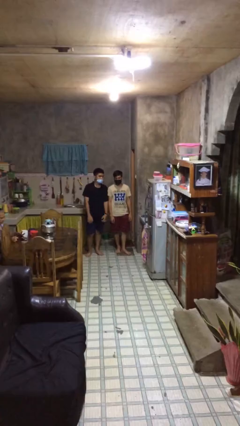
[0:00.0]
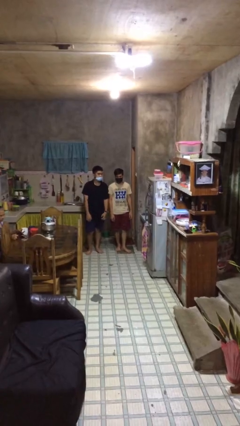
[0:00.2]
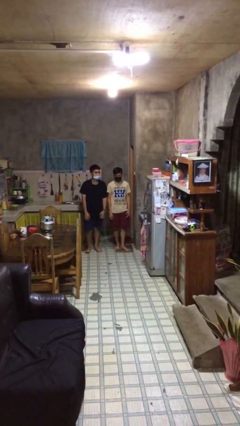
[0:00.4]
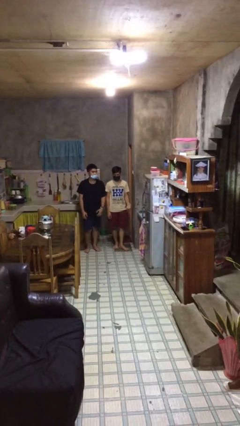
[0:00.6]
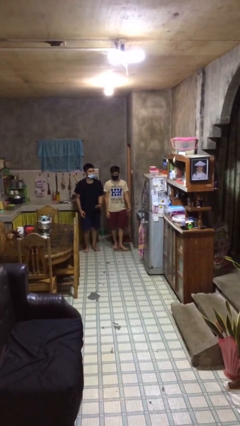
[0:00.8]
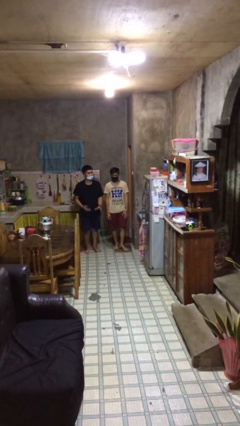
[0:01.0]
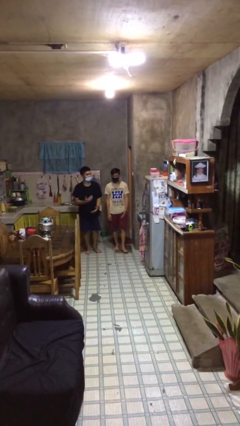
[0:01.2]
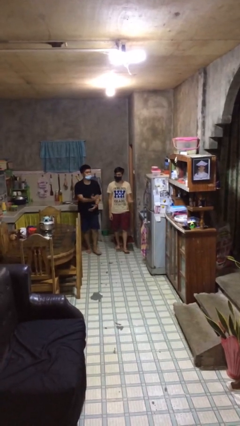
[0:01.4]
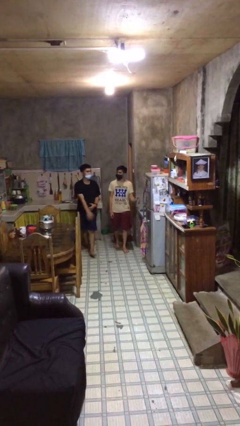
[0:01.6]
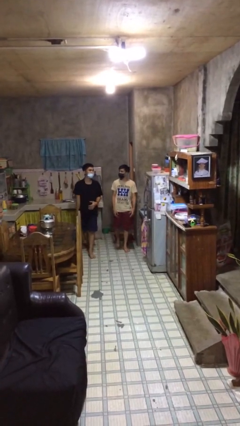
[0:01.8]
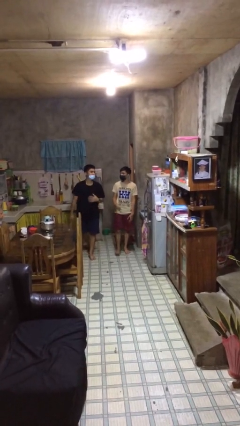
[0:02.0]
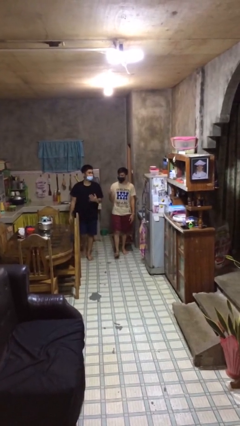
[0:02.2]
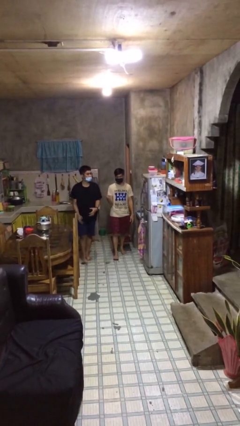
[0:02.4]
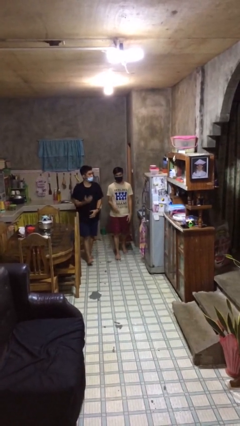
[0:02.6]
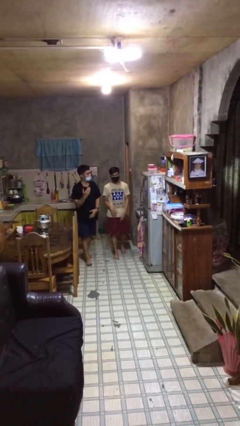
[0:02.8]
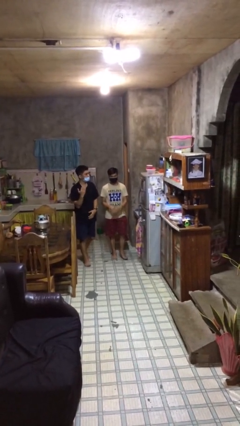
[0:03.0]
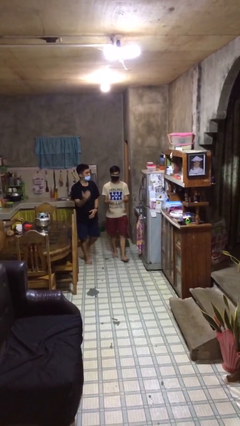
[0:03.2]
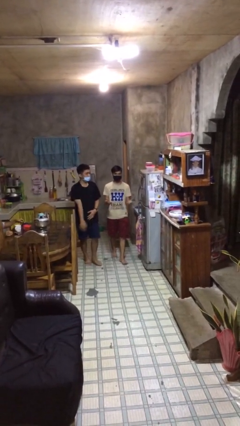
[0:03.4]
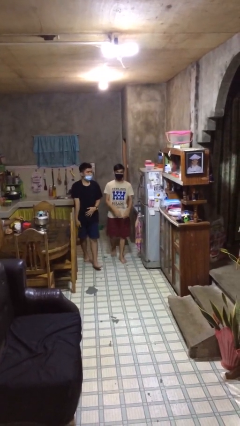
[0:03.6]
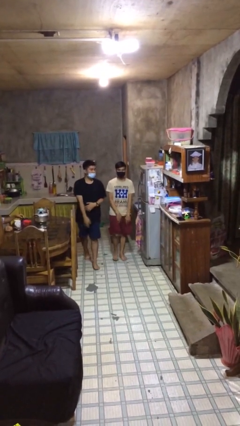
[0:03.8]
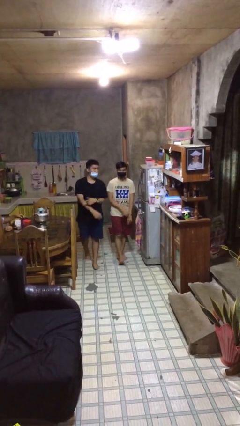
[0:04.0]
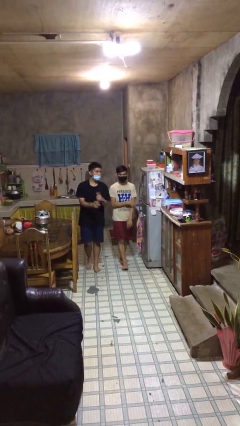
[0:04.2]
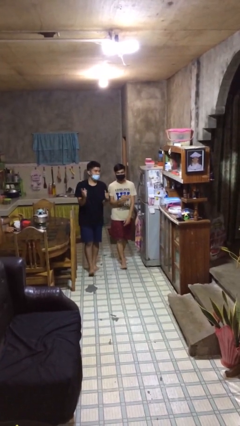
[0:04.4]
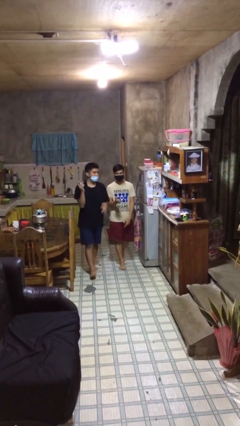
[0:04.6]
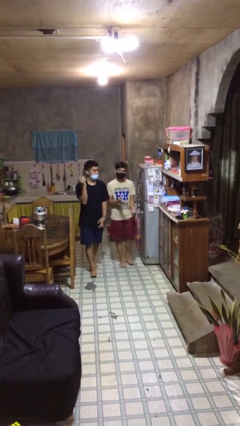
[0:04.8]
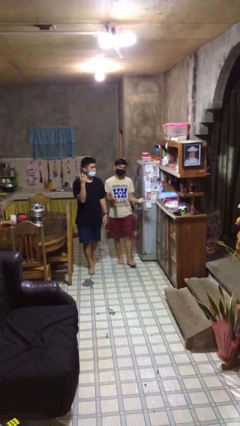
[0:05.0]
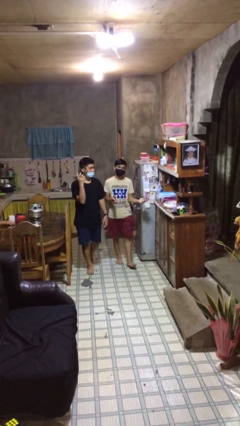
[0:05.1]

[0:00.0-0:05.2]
person talks to person

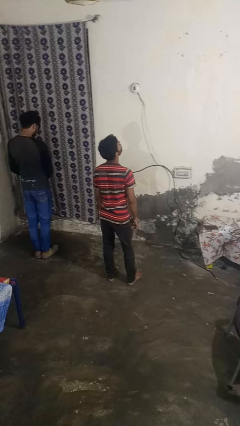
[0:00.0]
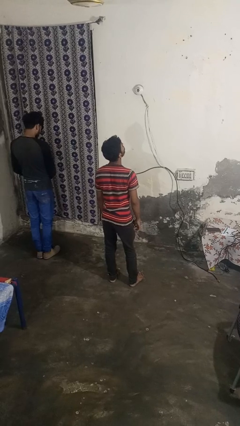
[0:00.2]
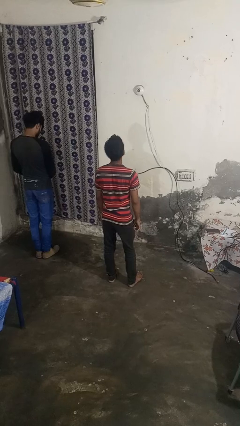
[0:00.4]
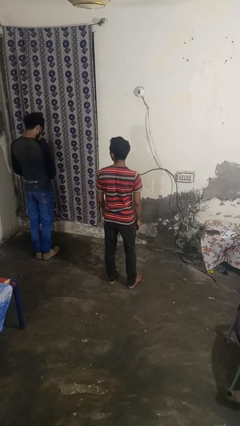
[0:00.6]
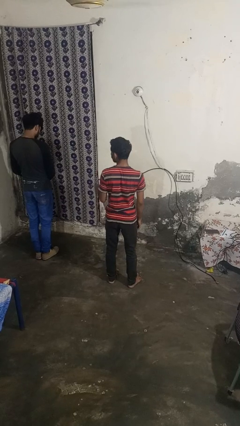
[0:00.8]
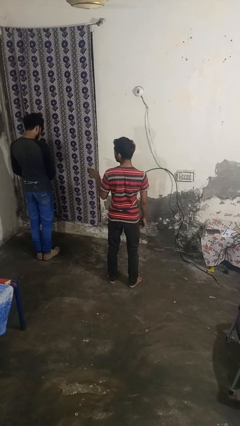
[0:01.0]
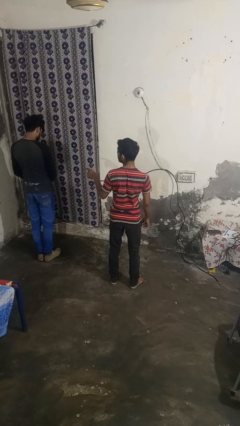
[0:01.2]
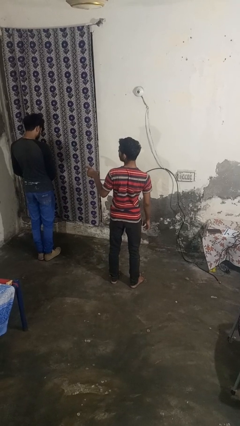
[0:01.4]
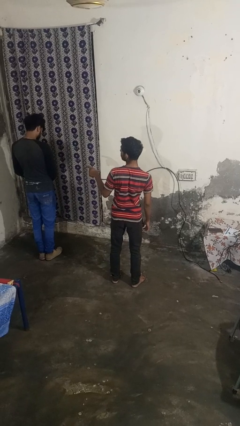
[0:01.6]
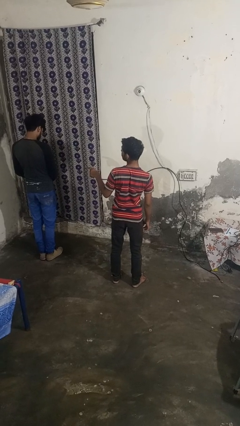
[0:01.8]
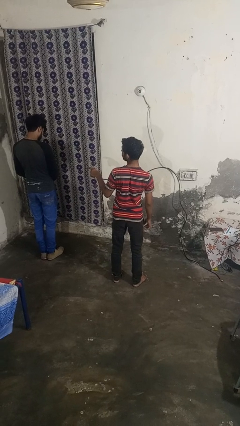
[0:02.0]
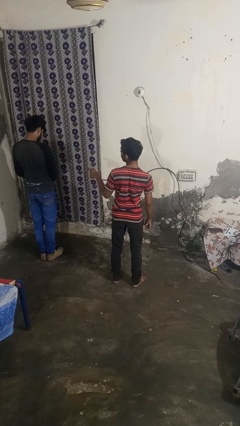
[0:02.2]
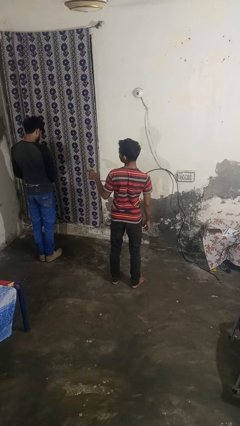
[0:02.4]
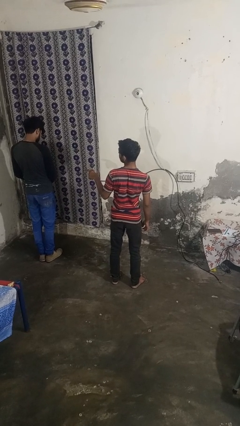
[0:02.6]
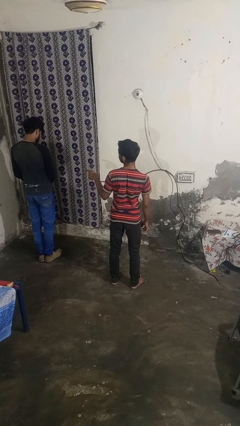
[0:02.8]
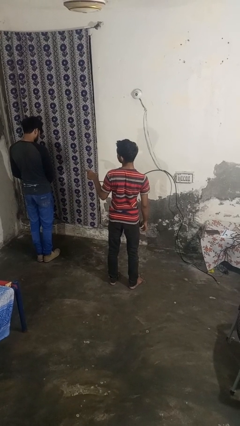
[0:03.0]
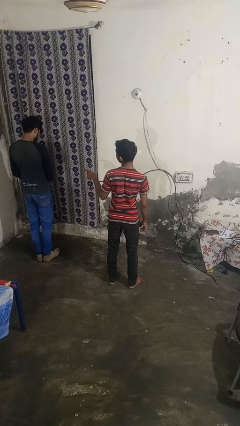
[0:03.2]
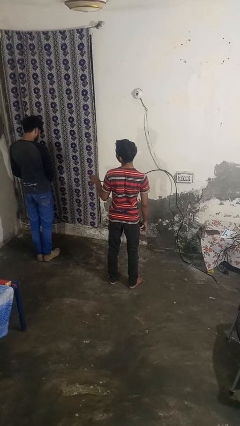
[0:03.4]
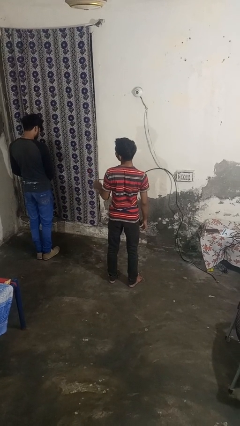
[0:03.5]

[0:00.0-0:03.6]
person points at person

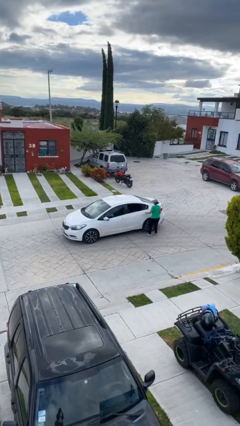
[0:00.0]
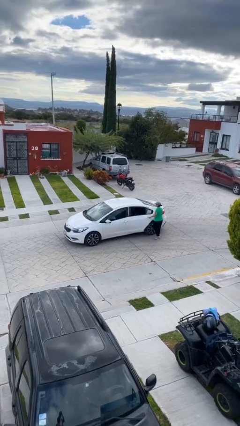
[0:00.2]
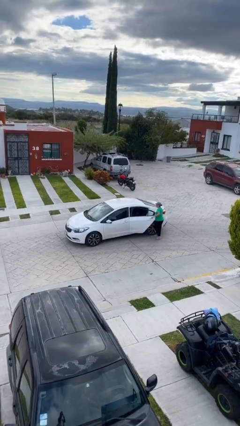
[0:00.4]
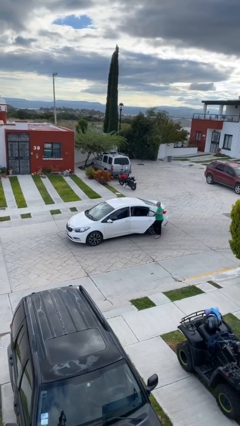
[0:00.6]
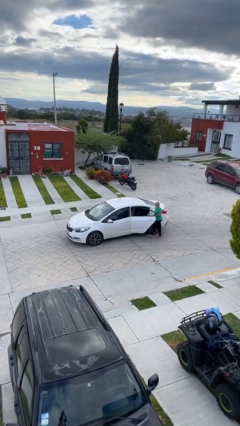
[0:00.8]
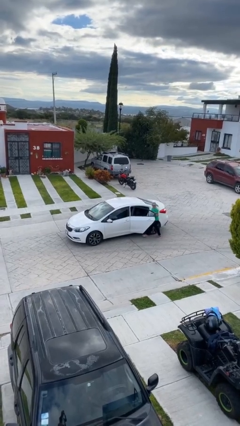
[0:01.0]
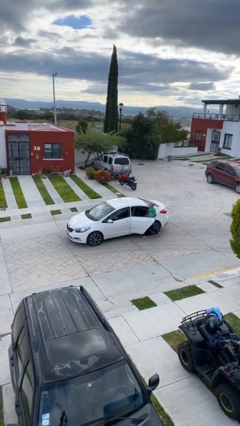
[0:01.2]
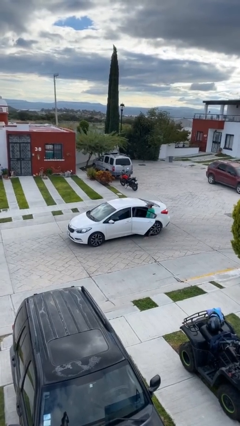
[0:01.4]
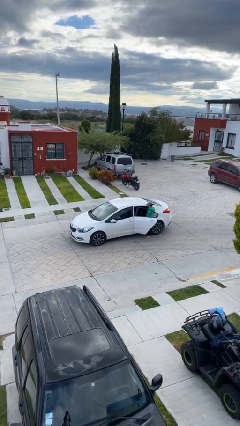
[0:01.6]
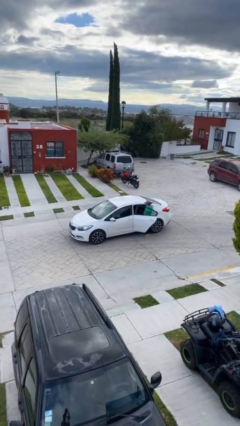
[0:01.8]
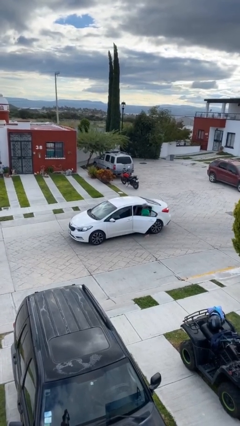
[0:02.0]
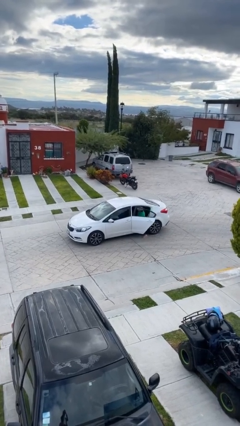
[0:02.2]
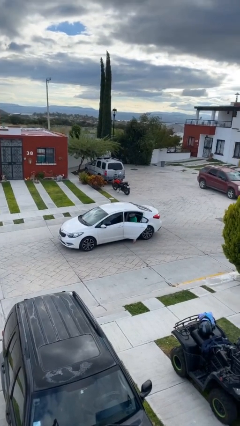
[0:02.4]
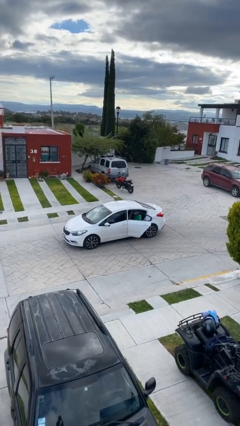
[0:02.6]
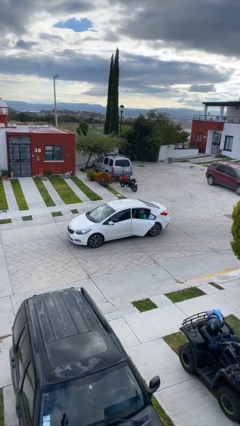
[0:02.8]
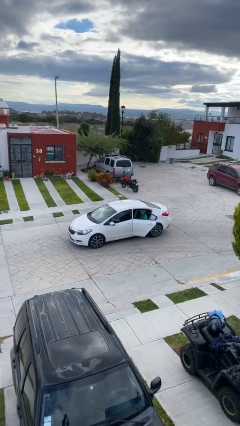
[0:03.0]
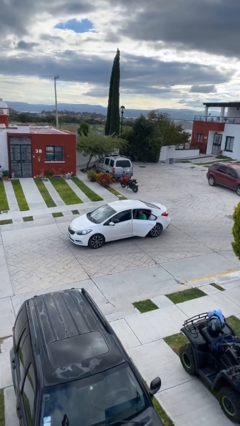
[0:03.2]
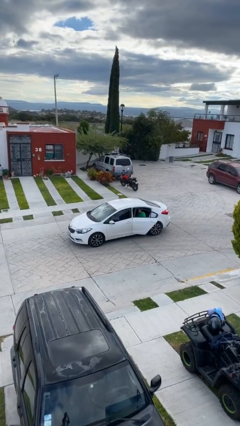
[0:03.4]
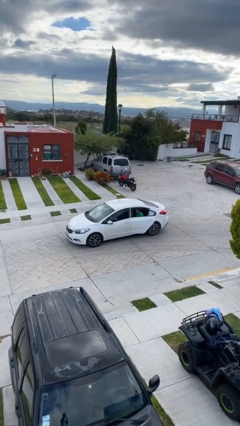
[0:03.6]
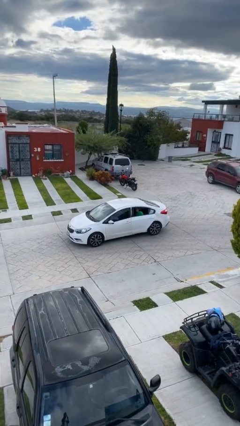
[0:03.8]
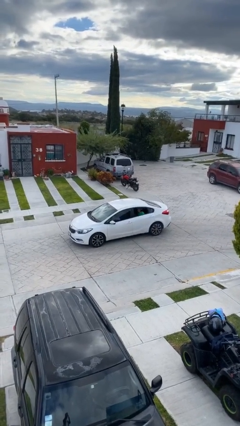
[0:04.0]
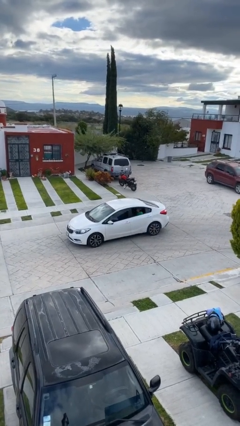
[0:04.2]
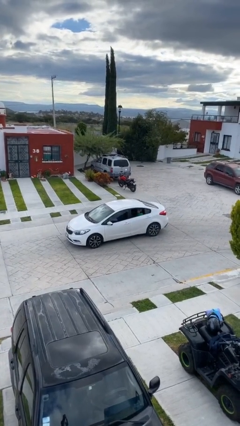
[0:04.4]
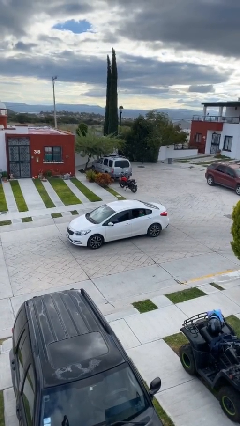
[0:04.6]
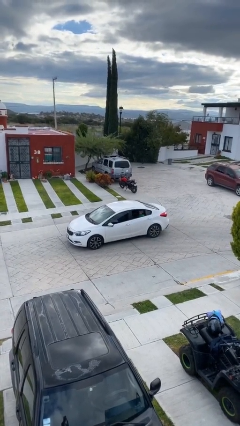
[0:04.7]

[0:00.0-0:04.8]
car picks up person

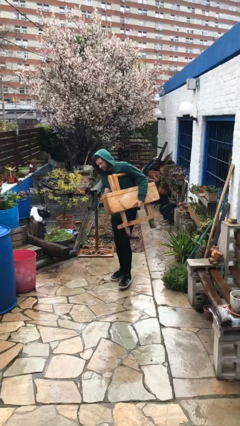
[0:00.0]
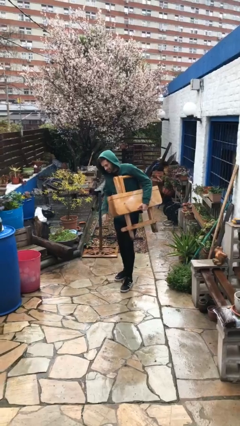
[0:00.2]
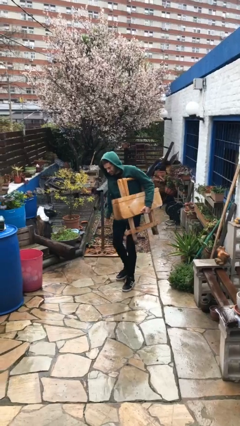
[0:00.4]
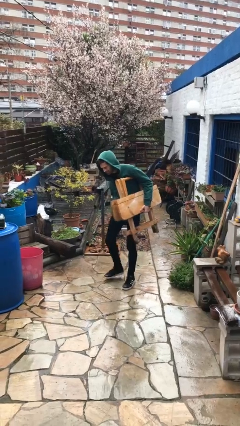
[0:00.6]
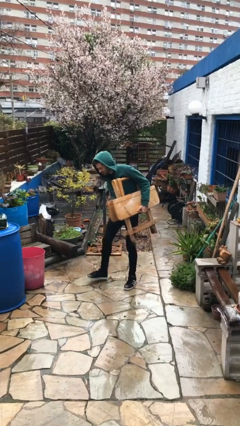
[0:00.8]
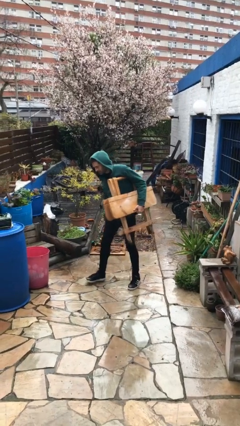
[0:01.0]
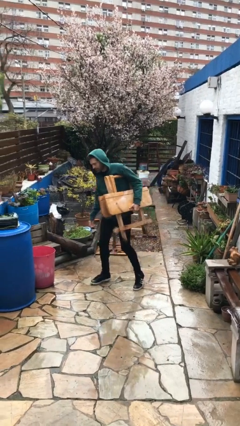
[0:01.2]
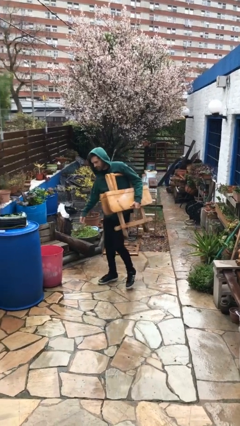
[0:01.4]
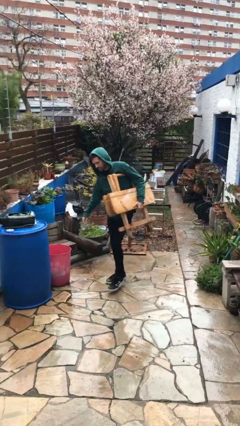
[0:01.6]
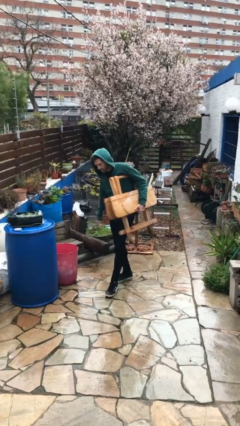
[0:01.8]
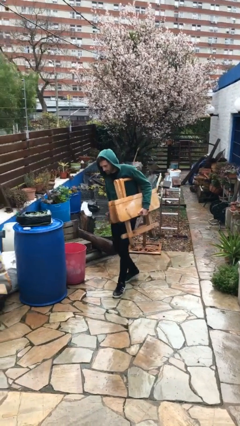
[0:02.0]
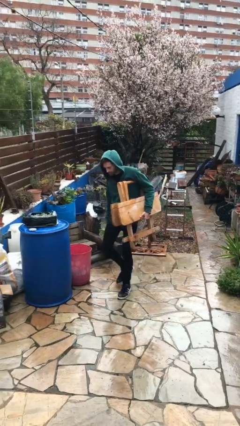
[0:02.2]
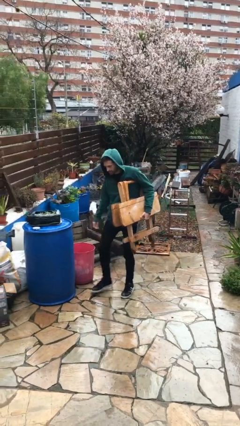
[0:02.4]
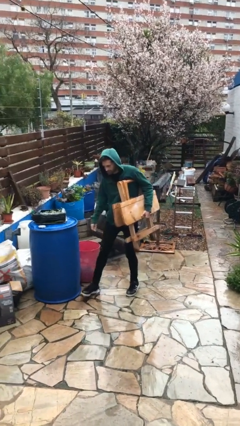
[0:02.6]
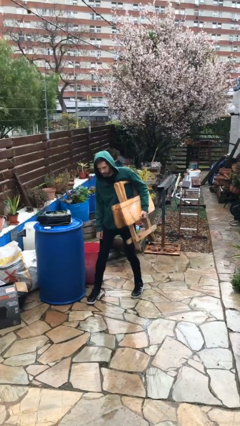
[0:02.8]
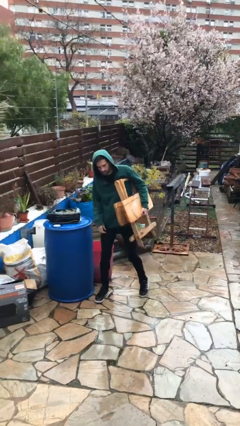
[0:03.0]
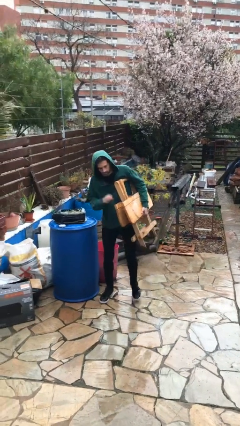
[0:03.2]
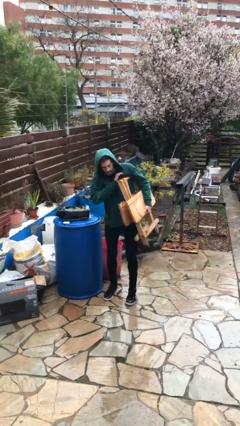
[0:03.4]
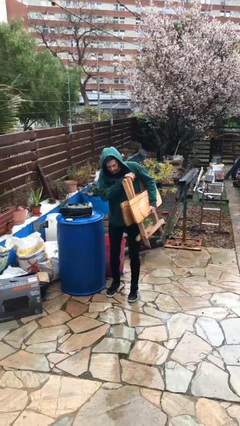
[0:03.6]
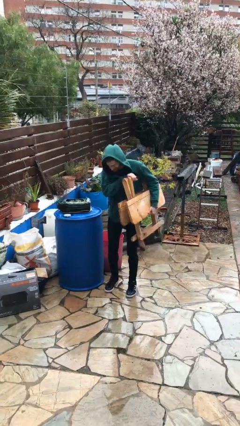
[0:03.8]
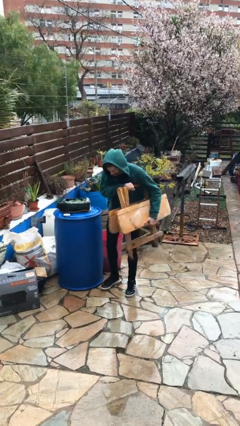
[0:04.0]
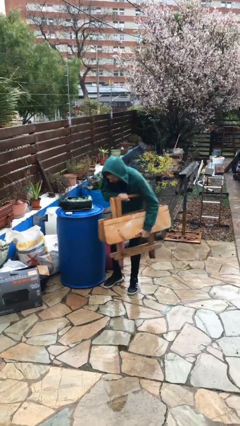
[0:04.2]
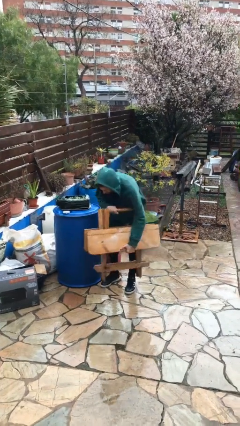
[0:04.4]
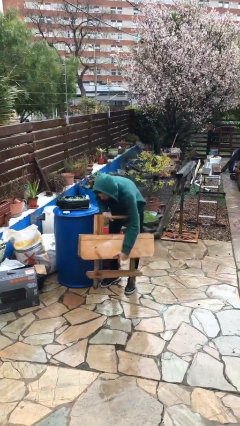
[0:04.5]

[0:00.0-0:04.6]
person carries heavy object
